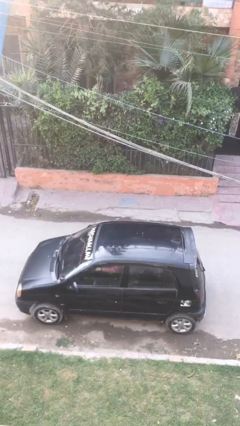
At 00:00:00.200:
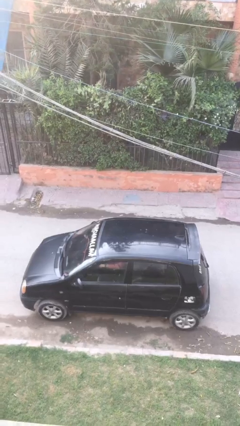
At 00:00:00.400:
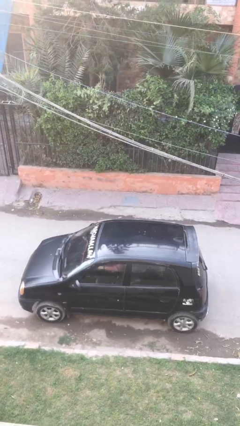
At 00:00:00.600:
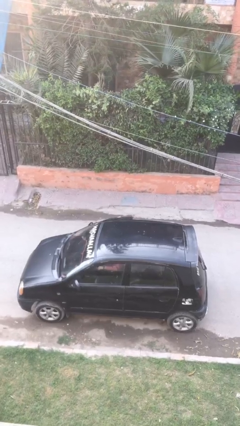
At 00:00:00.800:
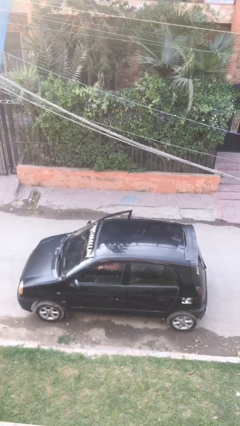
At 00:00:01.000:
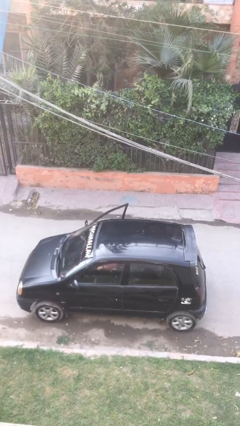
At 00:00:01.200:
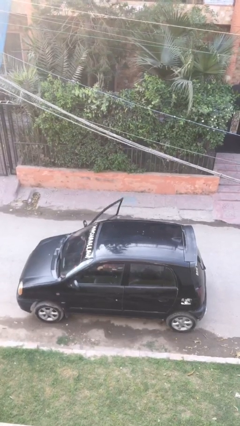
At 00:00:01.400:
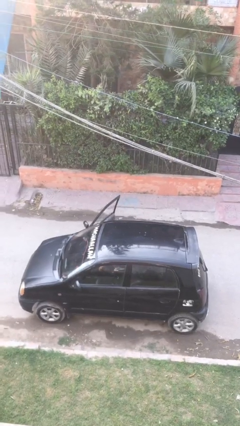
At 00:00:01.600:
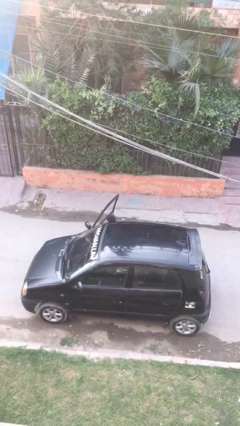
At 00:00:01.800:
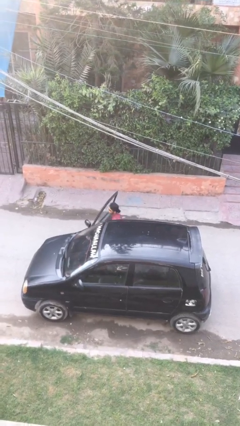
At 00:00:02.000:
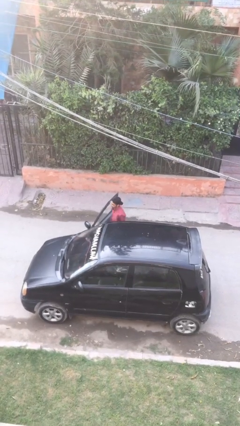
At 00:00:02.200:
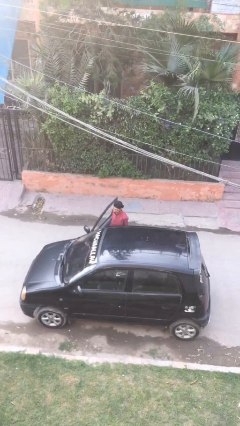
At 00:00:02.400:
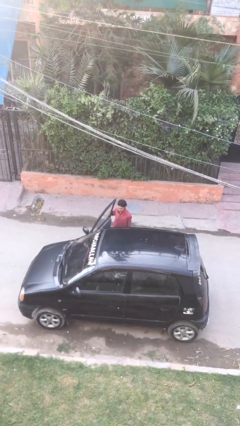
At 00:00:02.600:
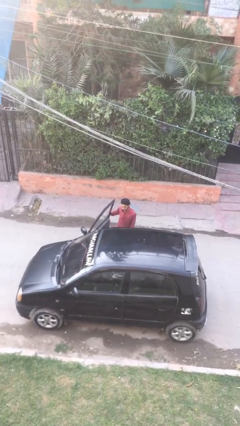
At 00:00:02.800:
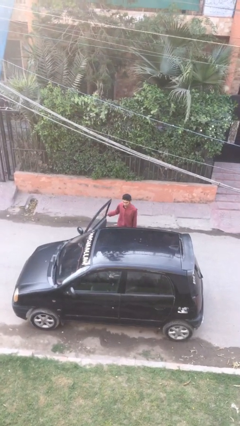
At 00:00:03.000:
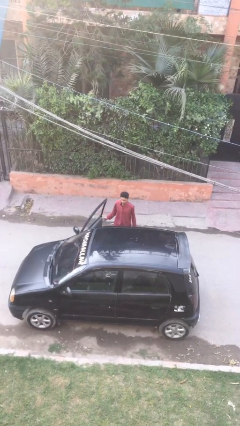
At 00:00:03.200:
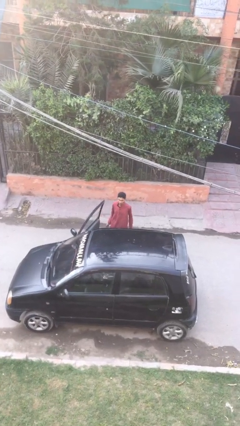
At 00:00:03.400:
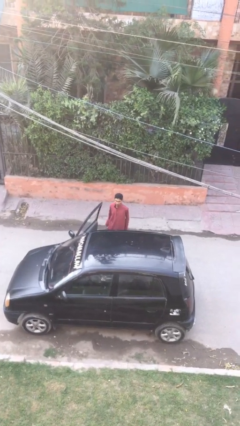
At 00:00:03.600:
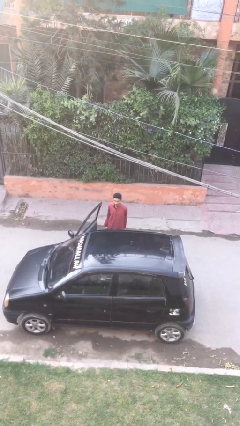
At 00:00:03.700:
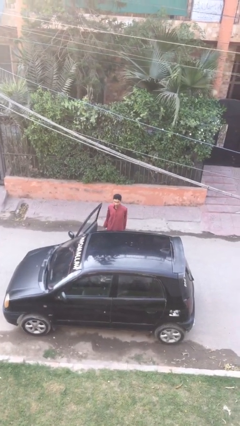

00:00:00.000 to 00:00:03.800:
person exits car

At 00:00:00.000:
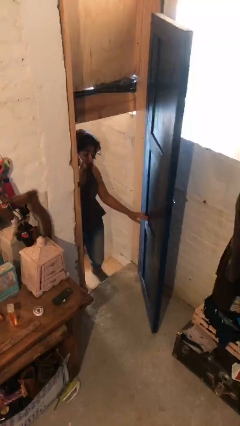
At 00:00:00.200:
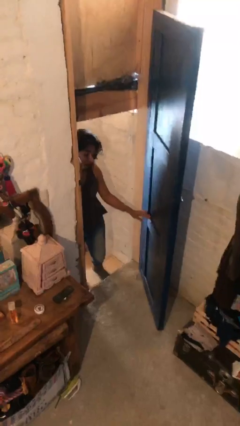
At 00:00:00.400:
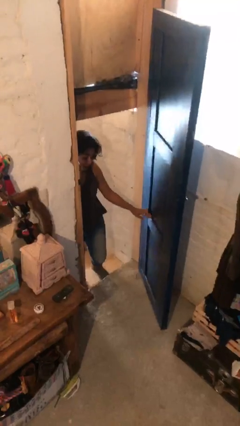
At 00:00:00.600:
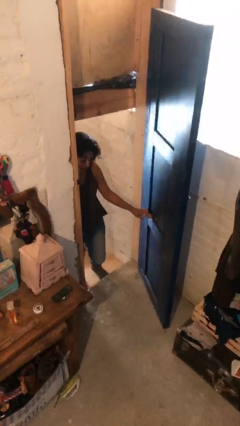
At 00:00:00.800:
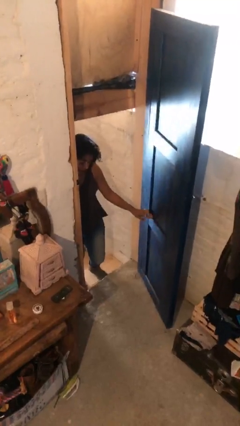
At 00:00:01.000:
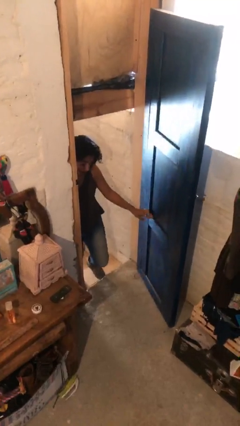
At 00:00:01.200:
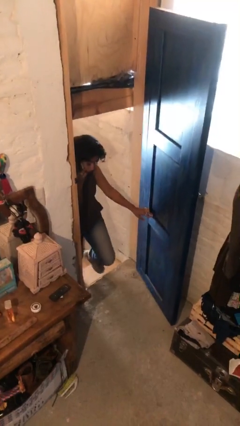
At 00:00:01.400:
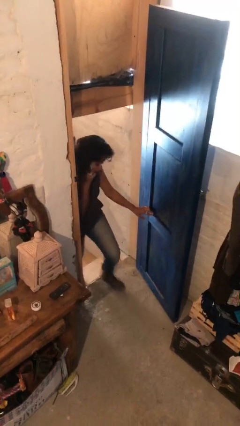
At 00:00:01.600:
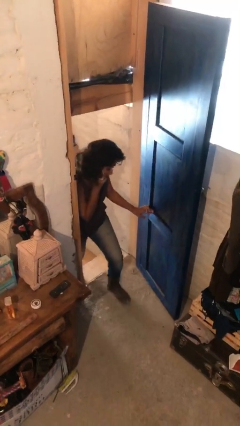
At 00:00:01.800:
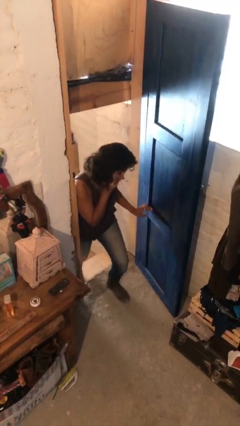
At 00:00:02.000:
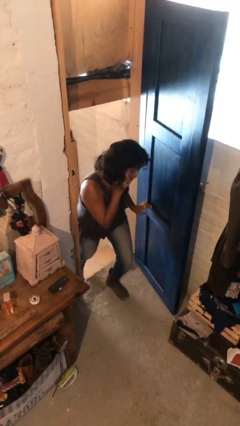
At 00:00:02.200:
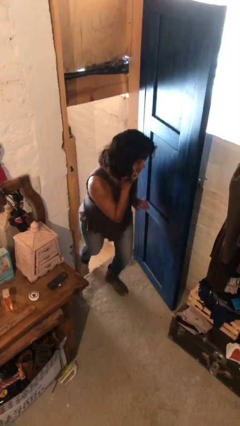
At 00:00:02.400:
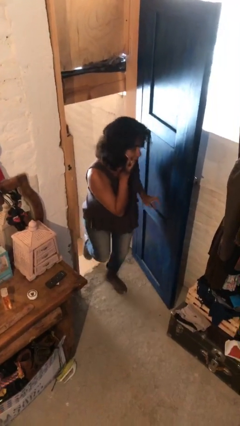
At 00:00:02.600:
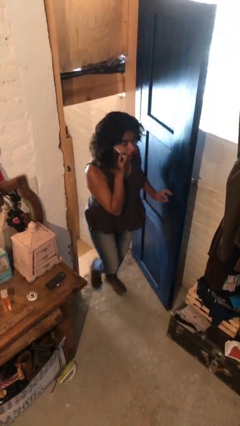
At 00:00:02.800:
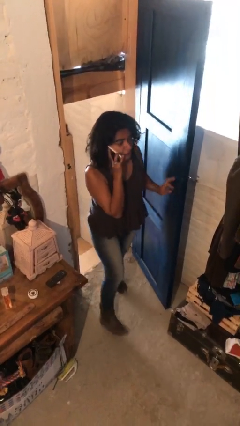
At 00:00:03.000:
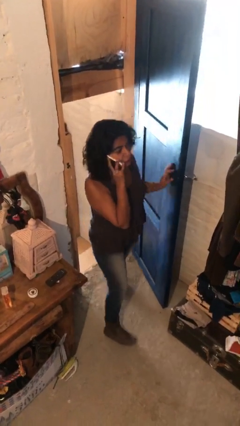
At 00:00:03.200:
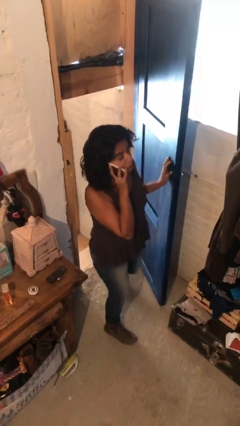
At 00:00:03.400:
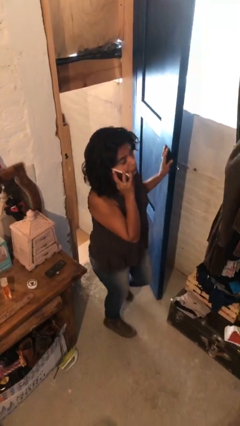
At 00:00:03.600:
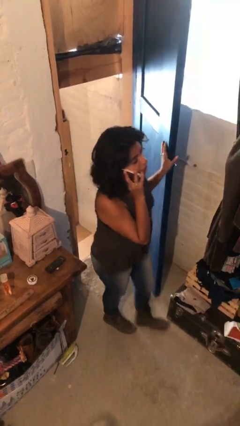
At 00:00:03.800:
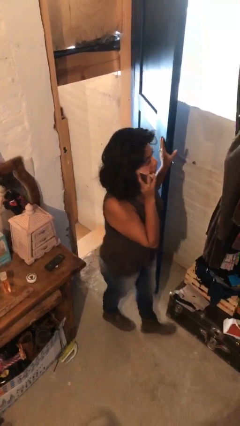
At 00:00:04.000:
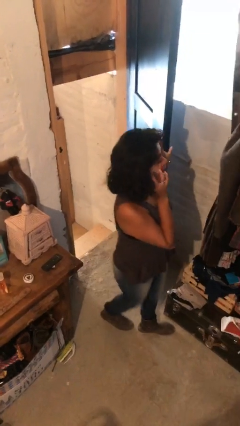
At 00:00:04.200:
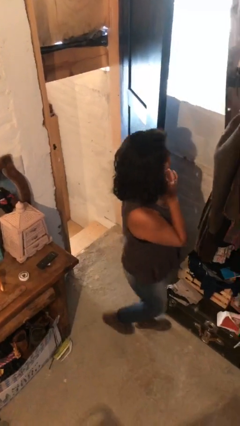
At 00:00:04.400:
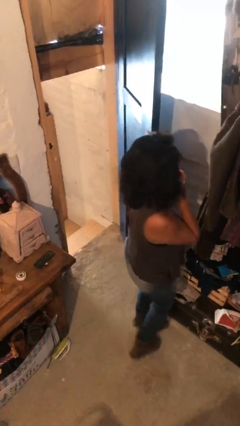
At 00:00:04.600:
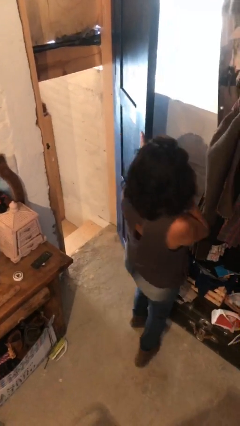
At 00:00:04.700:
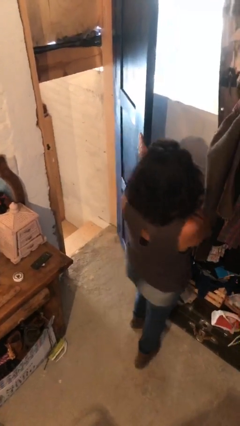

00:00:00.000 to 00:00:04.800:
person enters scene through structure

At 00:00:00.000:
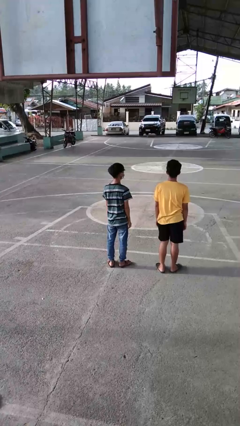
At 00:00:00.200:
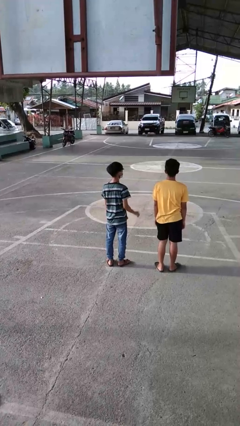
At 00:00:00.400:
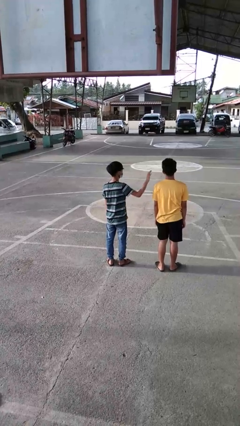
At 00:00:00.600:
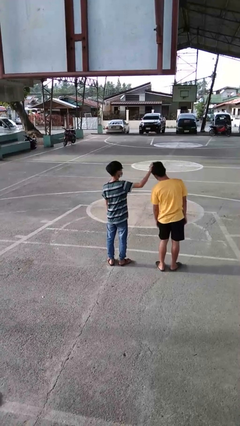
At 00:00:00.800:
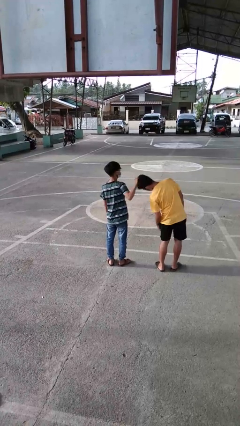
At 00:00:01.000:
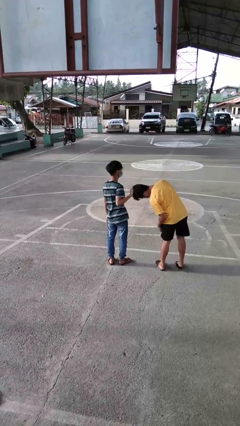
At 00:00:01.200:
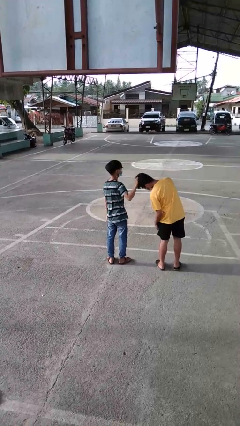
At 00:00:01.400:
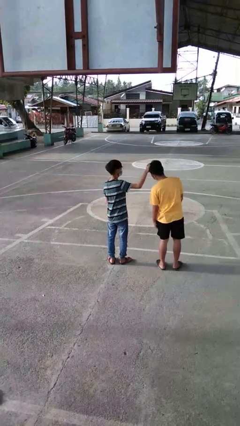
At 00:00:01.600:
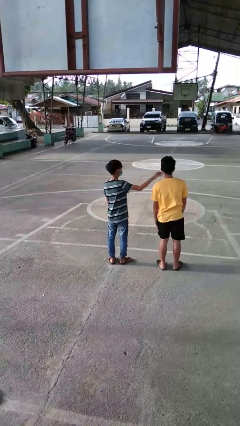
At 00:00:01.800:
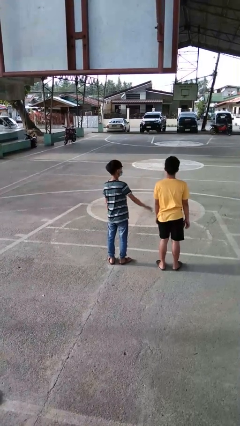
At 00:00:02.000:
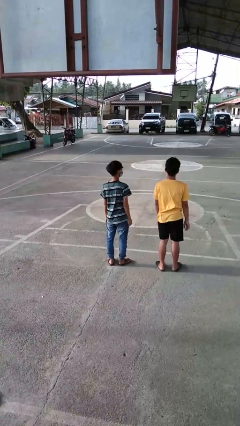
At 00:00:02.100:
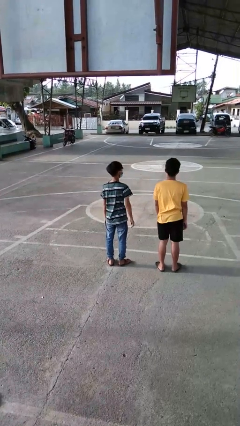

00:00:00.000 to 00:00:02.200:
person grabs person by hair

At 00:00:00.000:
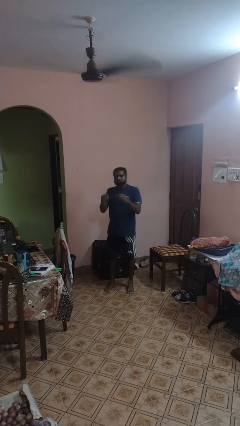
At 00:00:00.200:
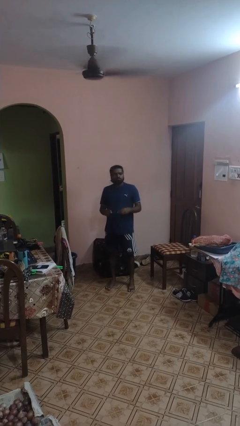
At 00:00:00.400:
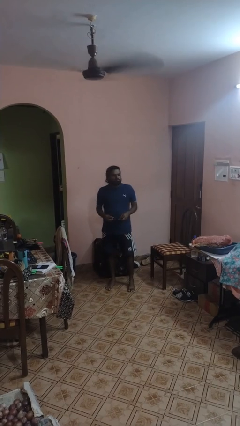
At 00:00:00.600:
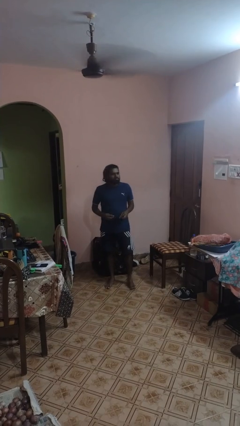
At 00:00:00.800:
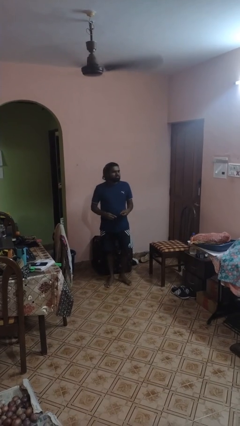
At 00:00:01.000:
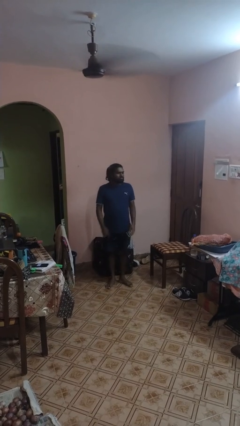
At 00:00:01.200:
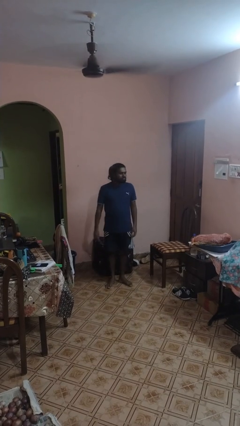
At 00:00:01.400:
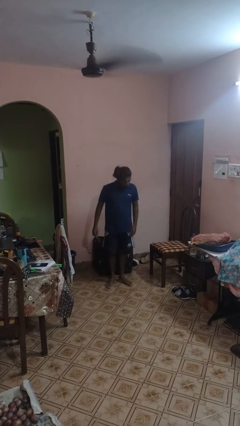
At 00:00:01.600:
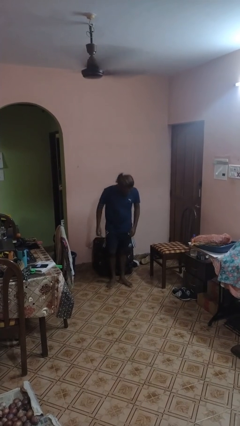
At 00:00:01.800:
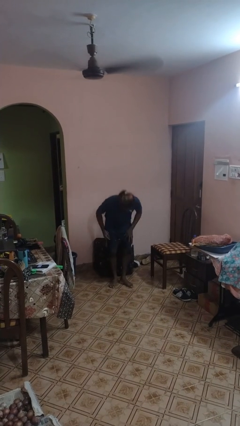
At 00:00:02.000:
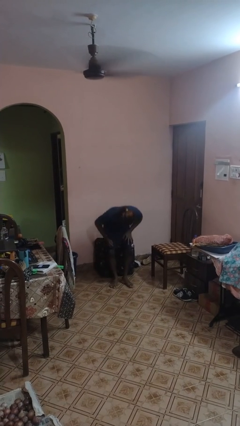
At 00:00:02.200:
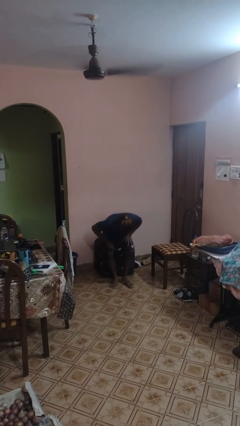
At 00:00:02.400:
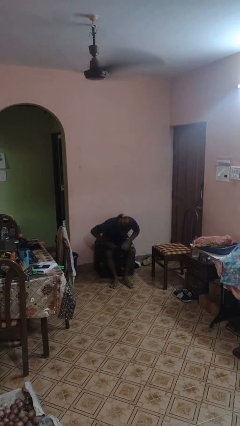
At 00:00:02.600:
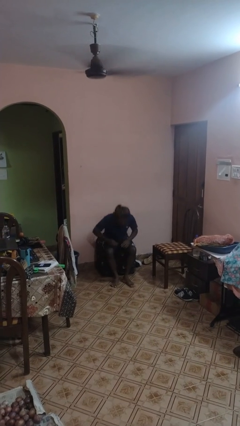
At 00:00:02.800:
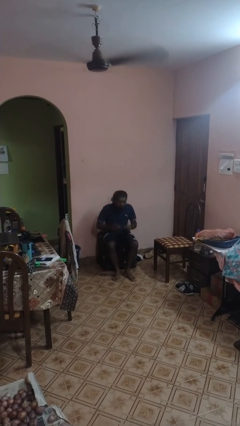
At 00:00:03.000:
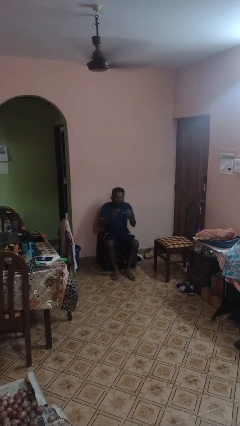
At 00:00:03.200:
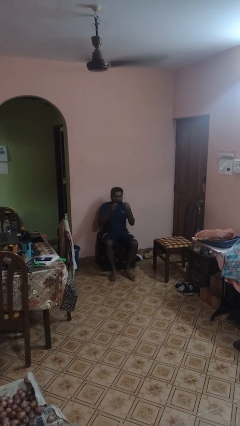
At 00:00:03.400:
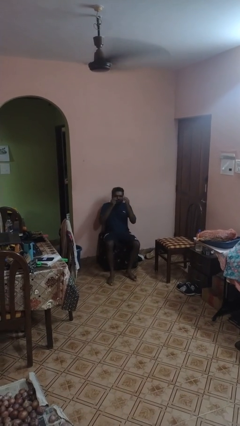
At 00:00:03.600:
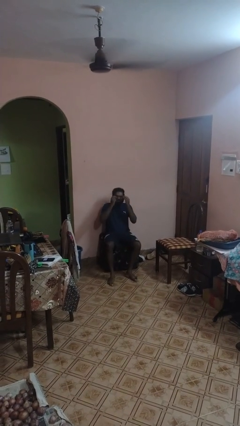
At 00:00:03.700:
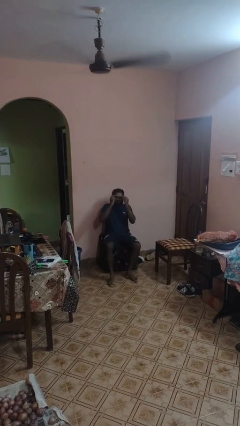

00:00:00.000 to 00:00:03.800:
person takes off glasses

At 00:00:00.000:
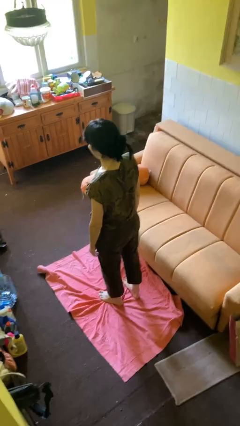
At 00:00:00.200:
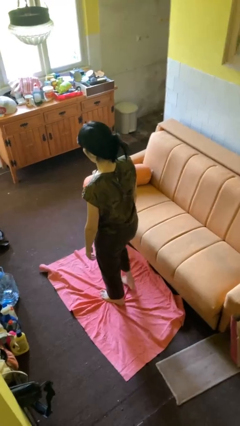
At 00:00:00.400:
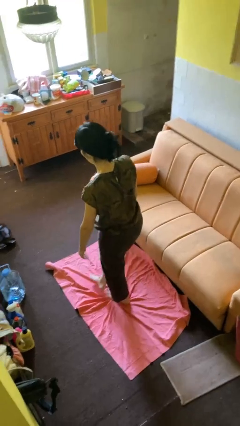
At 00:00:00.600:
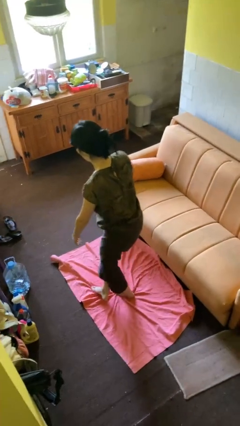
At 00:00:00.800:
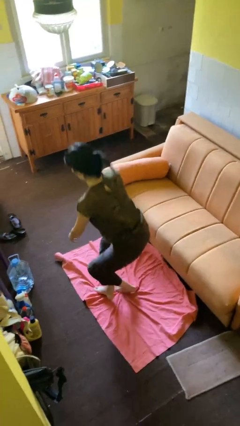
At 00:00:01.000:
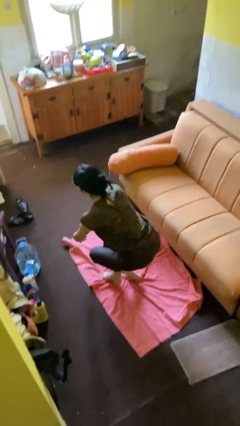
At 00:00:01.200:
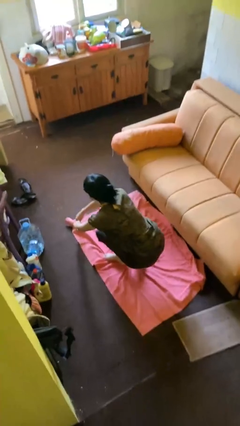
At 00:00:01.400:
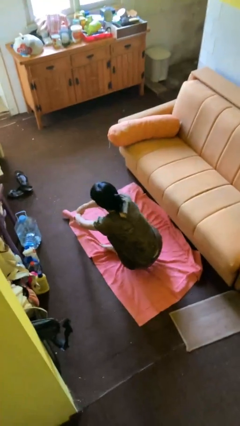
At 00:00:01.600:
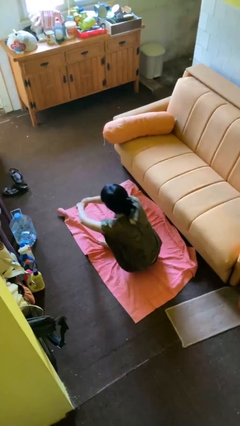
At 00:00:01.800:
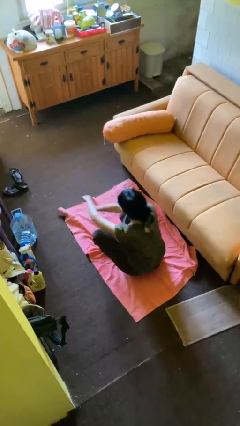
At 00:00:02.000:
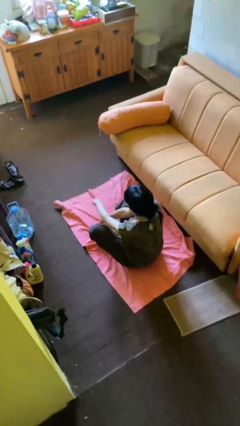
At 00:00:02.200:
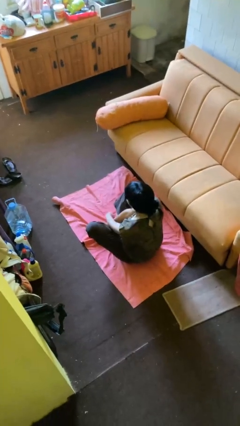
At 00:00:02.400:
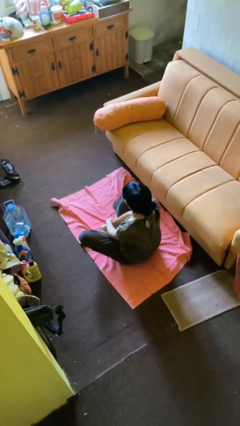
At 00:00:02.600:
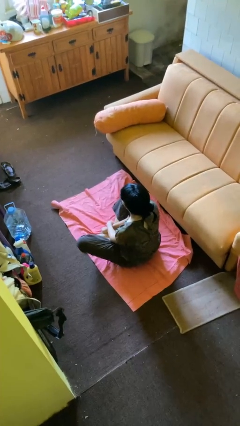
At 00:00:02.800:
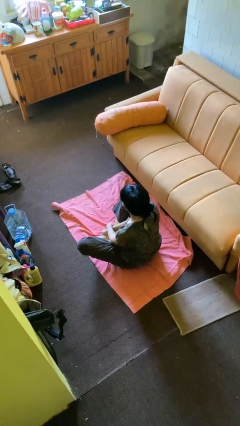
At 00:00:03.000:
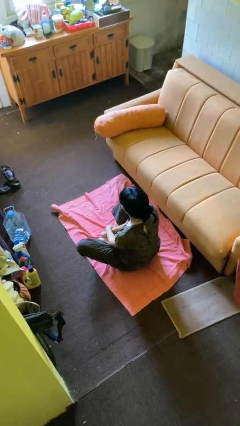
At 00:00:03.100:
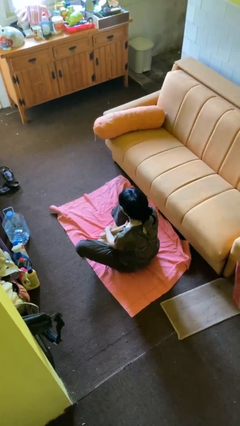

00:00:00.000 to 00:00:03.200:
person sits crisscross
